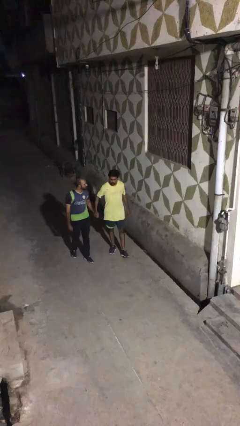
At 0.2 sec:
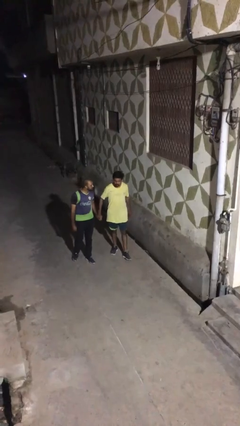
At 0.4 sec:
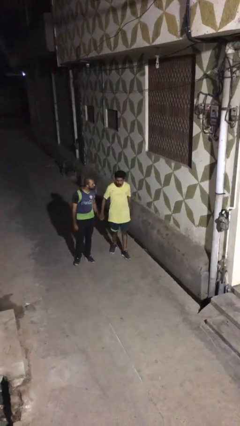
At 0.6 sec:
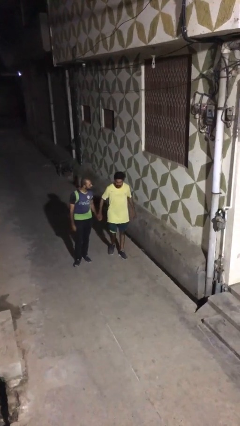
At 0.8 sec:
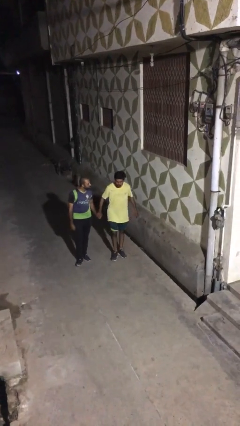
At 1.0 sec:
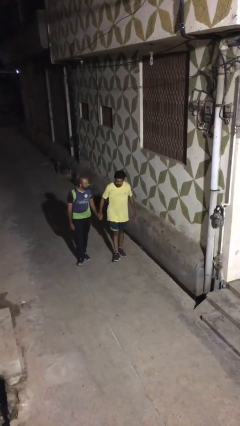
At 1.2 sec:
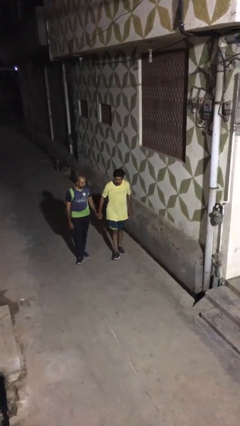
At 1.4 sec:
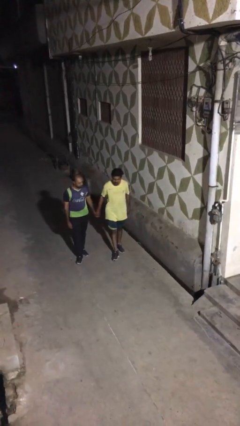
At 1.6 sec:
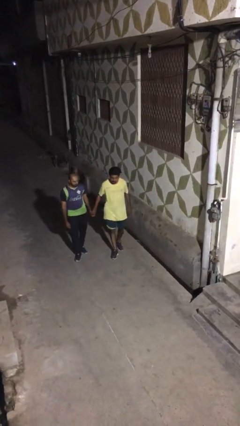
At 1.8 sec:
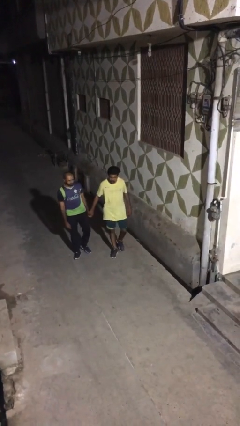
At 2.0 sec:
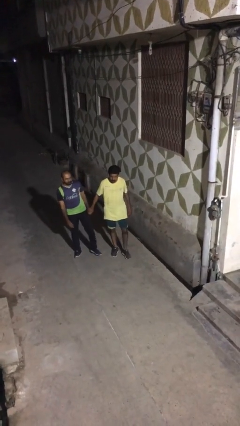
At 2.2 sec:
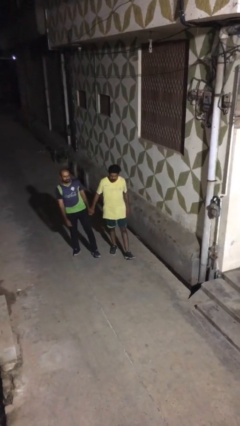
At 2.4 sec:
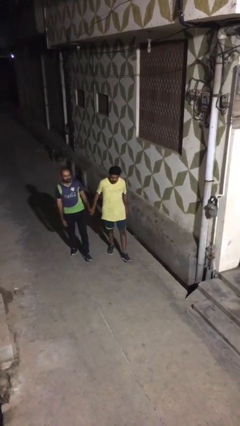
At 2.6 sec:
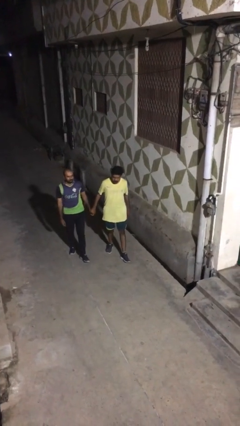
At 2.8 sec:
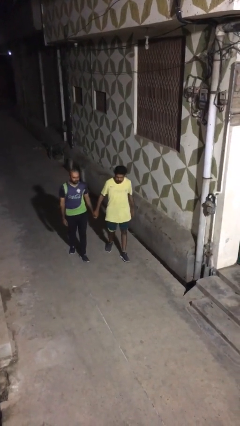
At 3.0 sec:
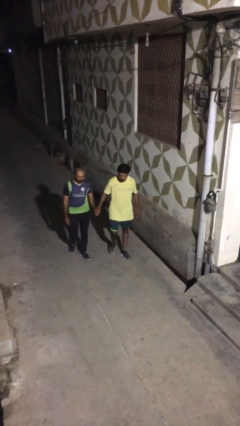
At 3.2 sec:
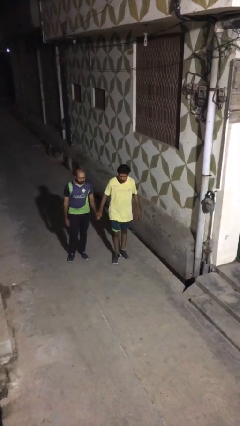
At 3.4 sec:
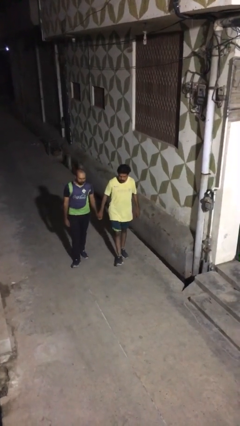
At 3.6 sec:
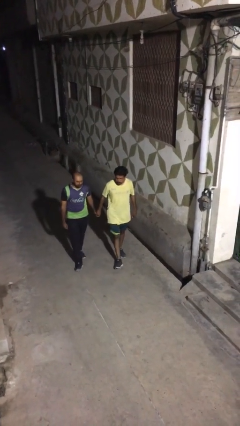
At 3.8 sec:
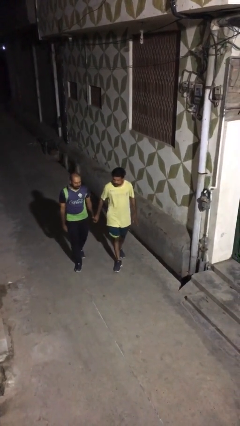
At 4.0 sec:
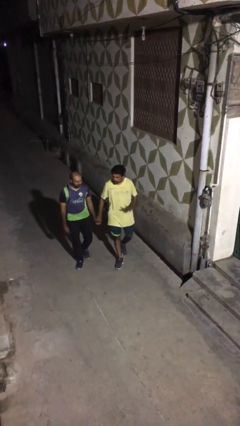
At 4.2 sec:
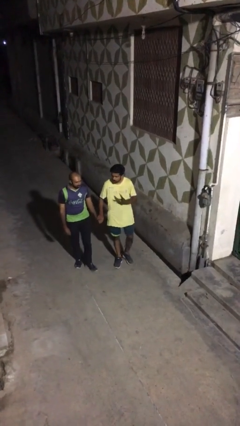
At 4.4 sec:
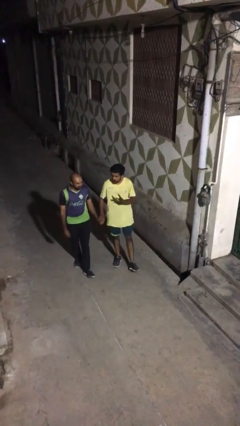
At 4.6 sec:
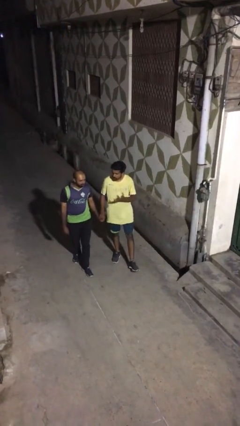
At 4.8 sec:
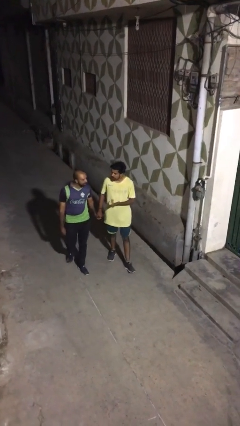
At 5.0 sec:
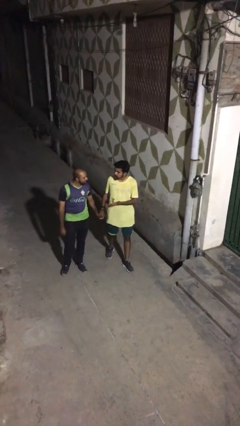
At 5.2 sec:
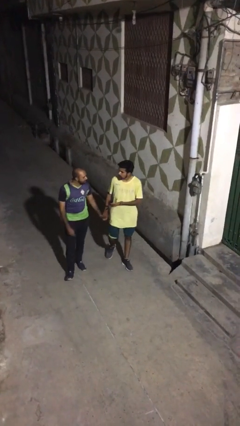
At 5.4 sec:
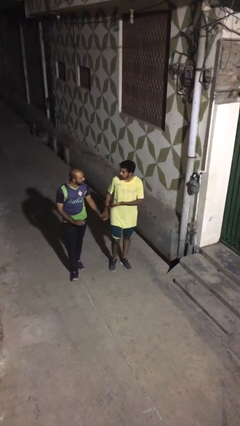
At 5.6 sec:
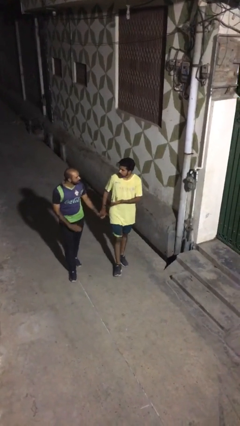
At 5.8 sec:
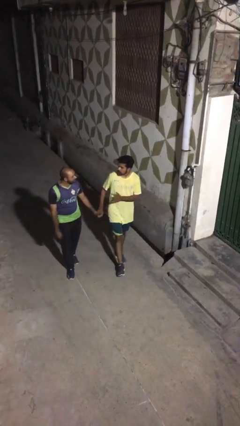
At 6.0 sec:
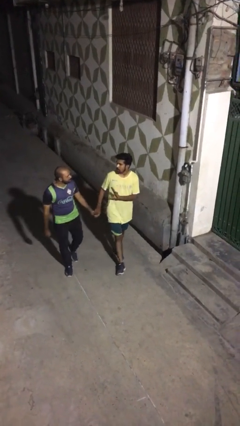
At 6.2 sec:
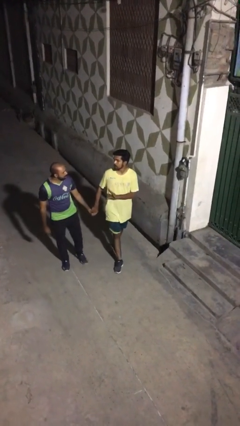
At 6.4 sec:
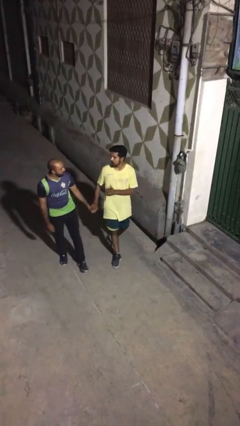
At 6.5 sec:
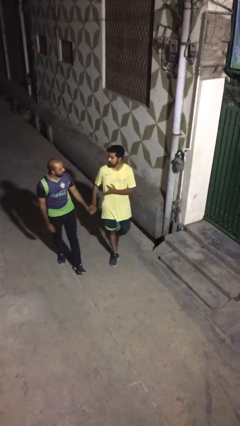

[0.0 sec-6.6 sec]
person holds hand

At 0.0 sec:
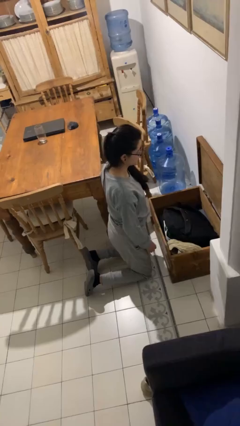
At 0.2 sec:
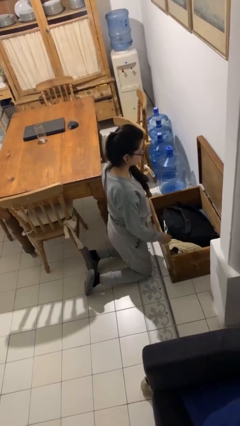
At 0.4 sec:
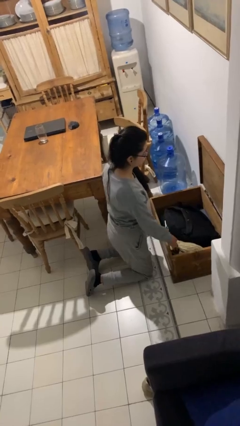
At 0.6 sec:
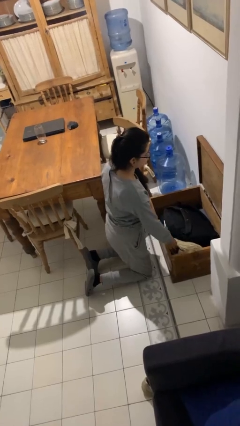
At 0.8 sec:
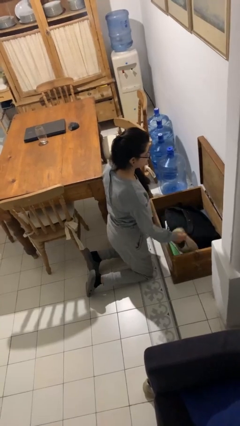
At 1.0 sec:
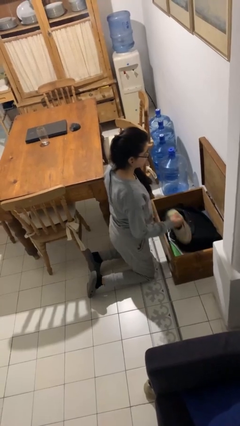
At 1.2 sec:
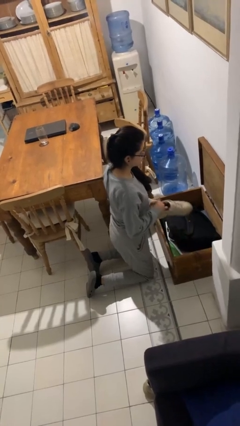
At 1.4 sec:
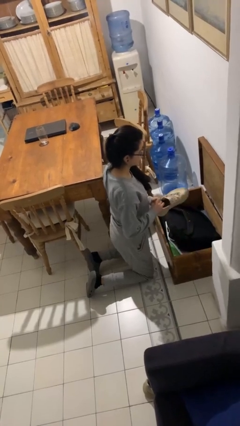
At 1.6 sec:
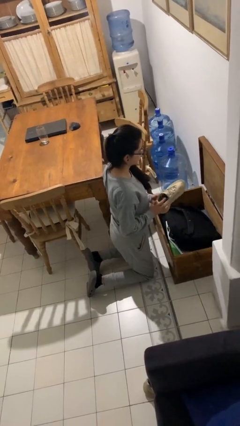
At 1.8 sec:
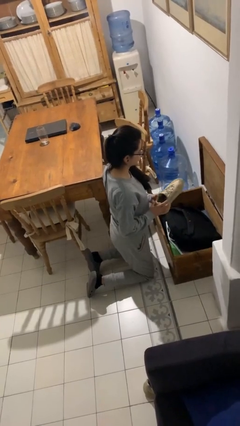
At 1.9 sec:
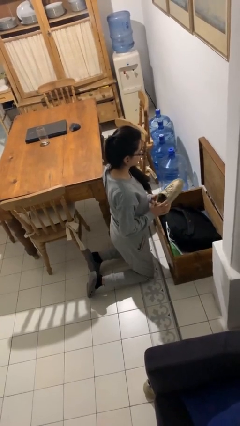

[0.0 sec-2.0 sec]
person takes object from box

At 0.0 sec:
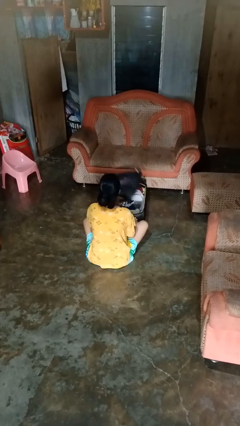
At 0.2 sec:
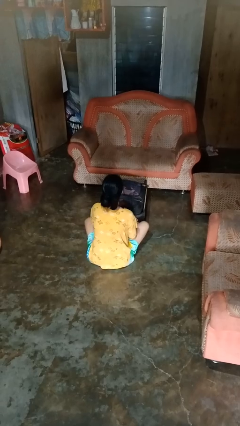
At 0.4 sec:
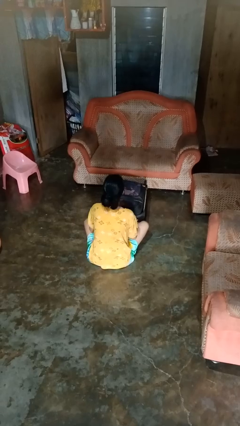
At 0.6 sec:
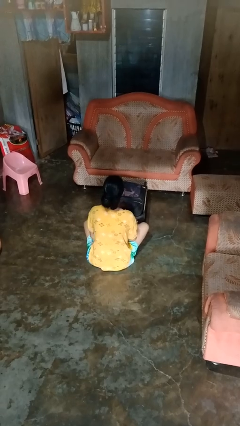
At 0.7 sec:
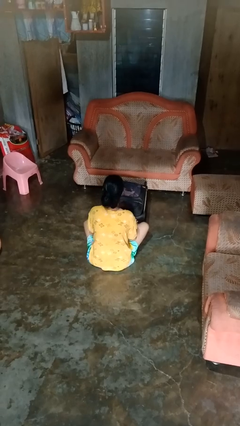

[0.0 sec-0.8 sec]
person closes suitcase

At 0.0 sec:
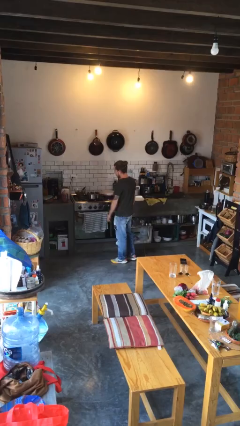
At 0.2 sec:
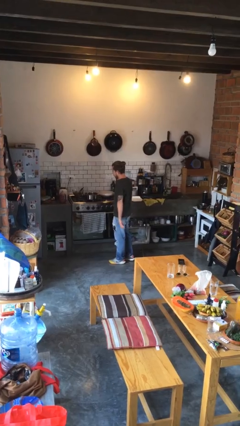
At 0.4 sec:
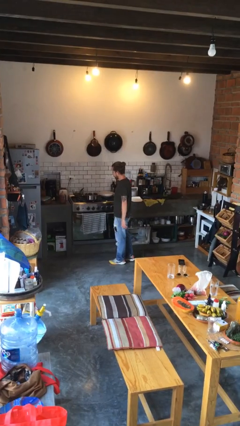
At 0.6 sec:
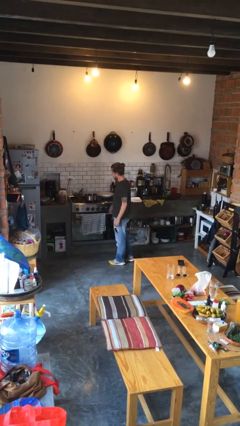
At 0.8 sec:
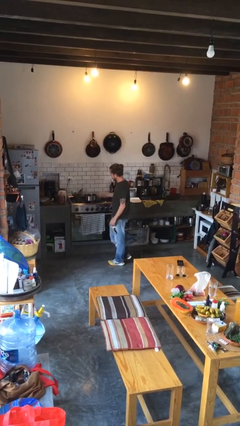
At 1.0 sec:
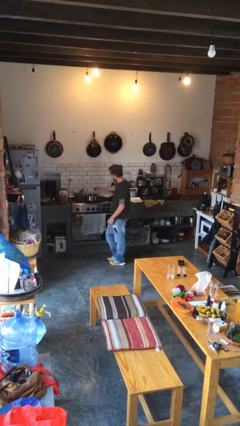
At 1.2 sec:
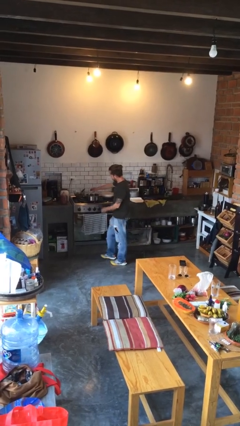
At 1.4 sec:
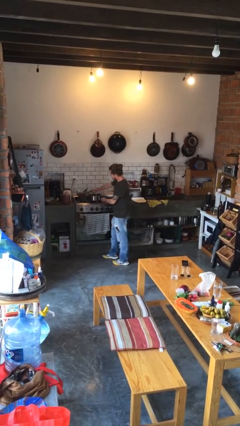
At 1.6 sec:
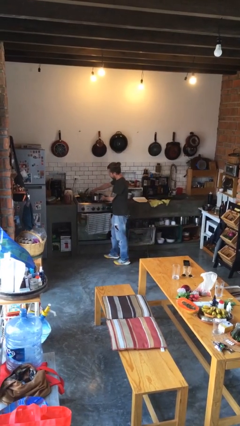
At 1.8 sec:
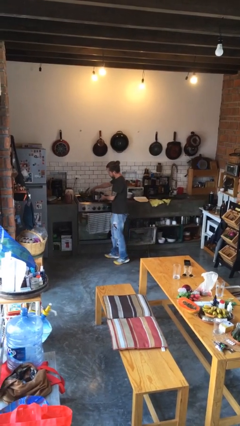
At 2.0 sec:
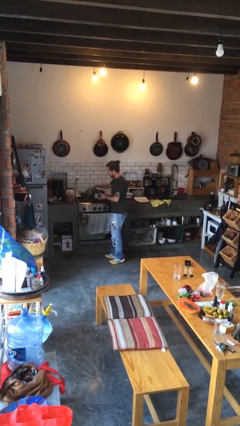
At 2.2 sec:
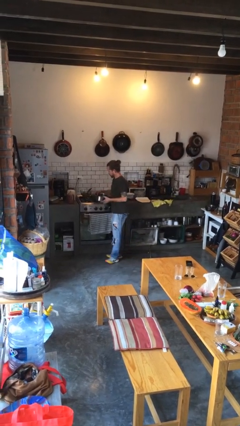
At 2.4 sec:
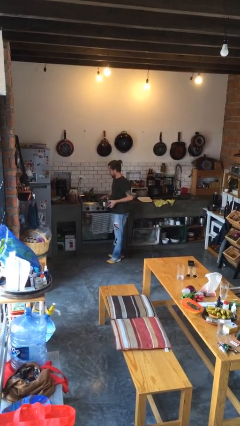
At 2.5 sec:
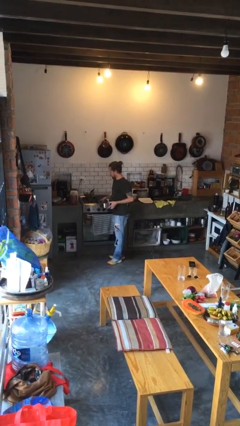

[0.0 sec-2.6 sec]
person picks up object from countertop

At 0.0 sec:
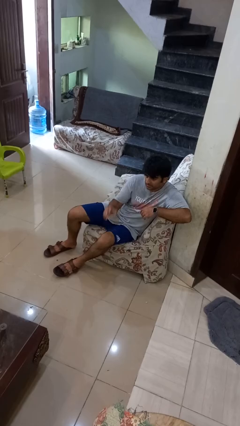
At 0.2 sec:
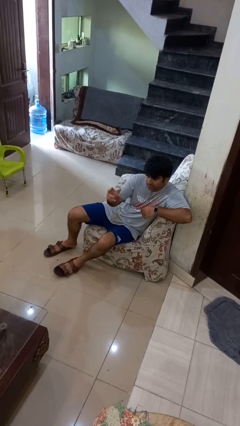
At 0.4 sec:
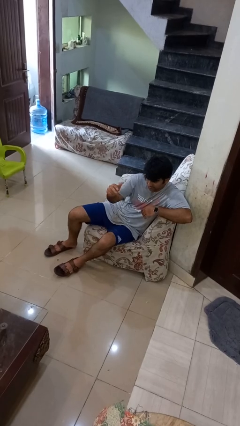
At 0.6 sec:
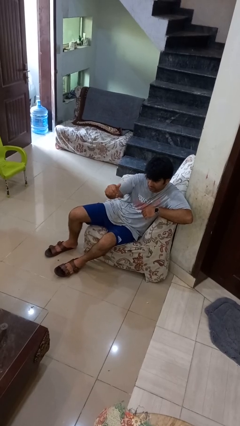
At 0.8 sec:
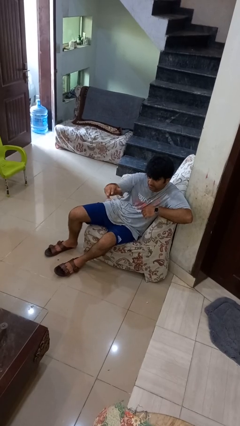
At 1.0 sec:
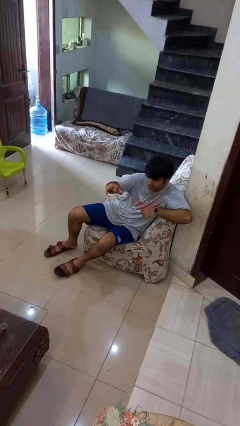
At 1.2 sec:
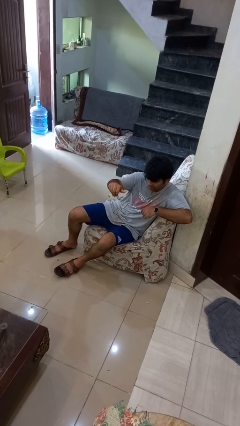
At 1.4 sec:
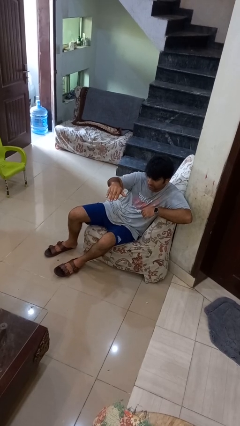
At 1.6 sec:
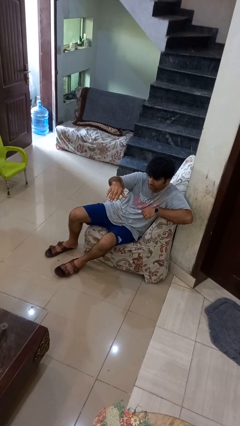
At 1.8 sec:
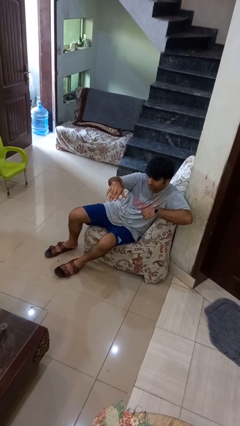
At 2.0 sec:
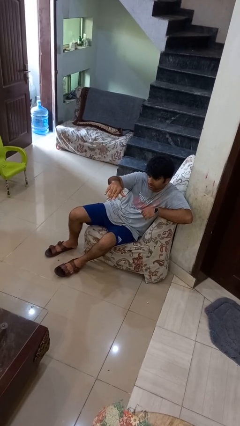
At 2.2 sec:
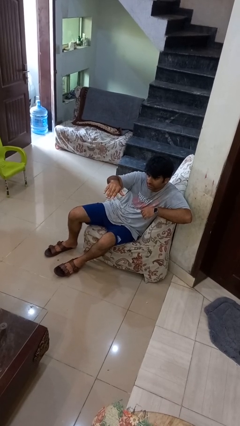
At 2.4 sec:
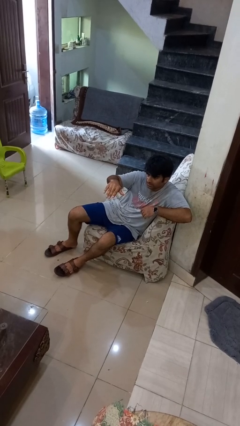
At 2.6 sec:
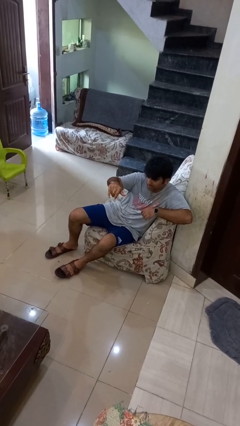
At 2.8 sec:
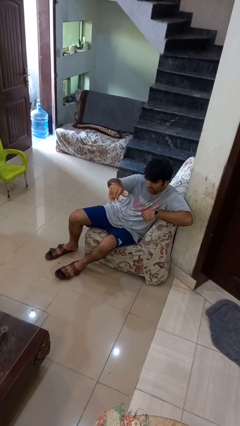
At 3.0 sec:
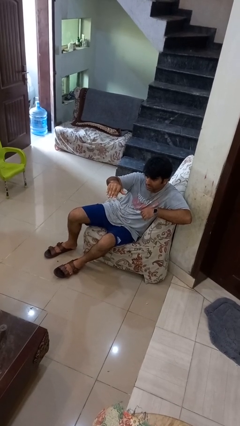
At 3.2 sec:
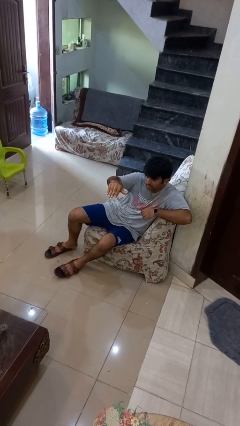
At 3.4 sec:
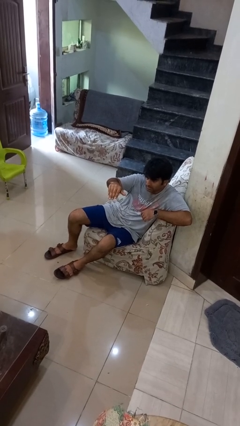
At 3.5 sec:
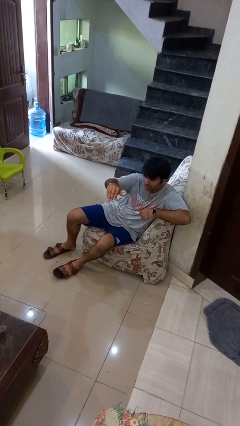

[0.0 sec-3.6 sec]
person gestures come here

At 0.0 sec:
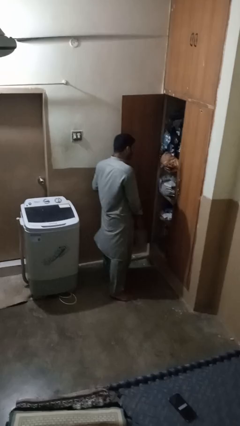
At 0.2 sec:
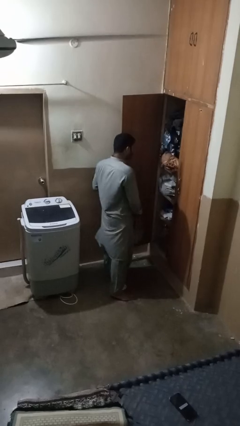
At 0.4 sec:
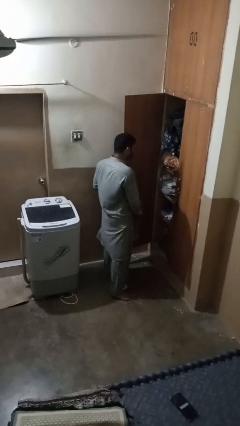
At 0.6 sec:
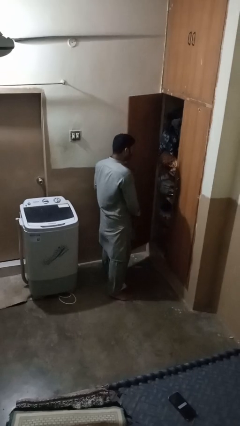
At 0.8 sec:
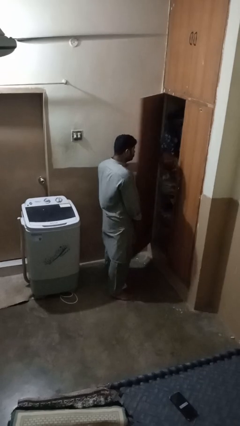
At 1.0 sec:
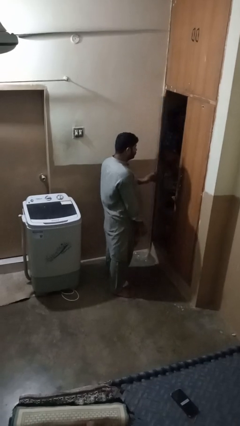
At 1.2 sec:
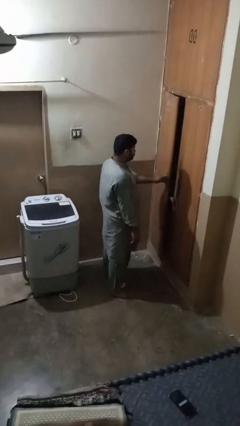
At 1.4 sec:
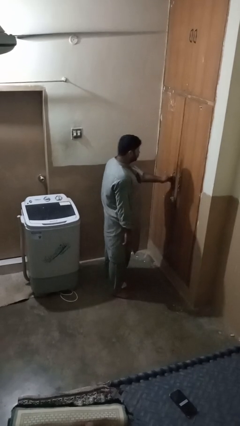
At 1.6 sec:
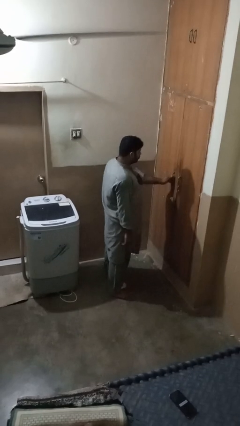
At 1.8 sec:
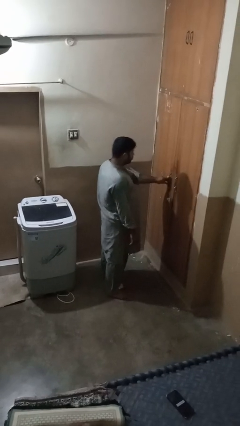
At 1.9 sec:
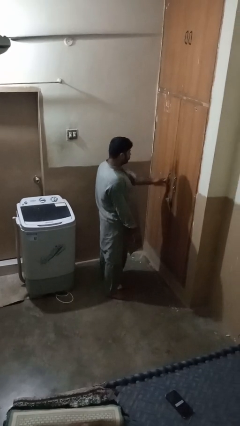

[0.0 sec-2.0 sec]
person closes closet door
